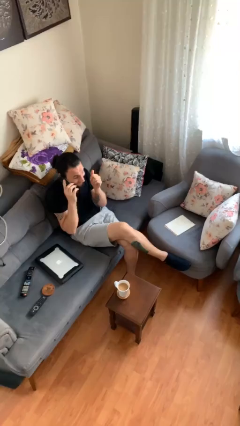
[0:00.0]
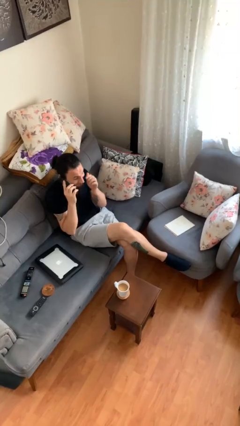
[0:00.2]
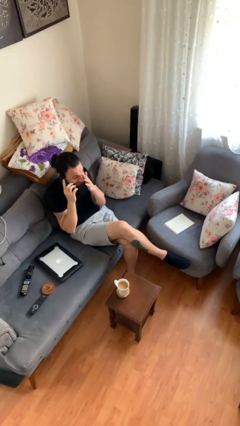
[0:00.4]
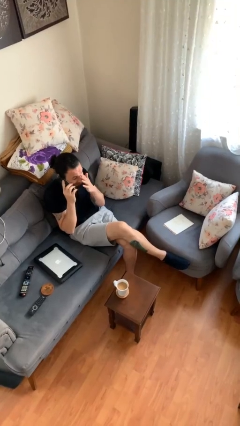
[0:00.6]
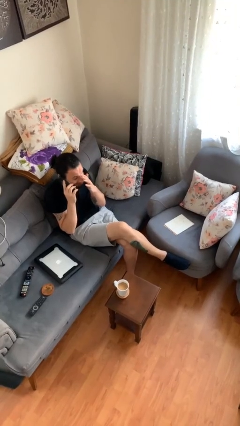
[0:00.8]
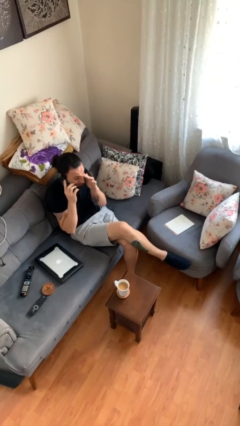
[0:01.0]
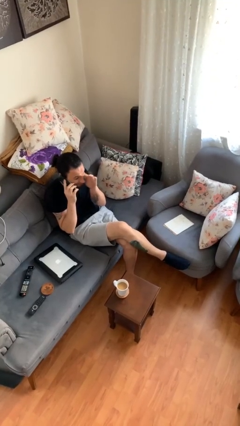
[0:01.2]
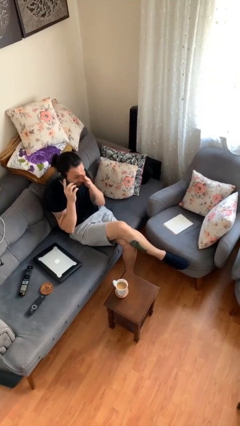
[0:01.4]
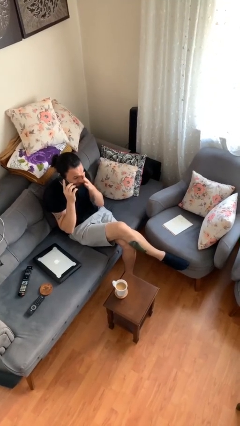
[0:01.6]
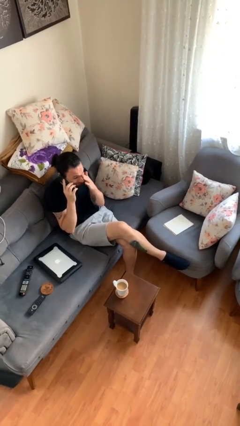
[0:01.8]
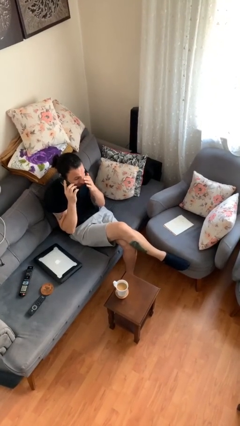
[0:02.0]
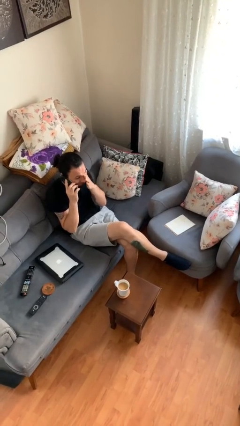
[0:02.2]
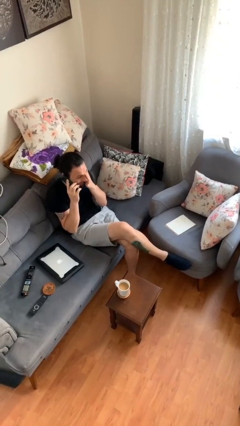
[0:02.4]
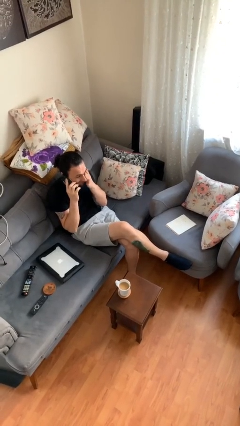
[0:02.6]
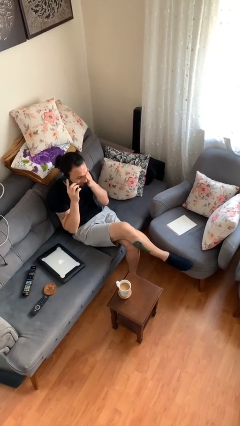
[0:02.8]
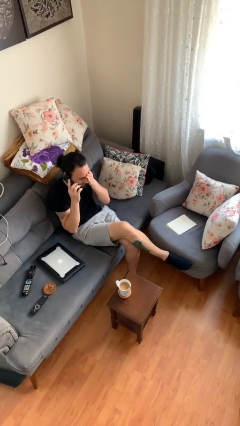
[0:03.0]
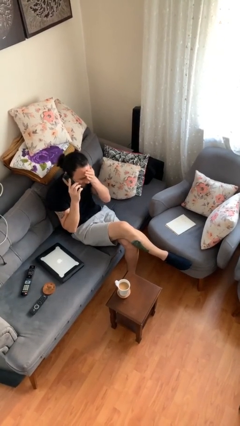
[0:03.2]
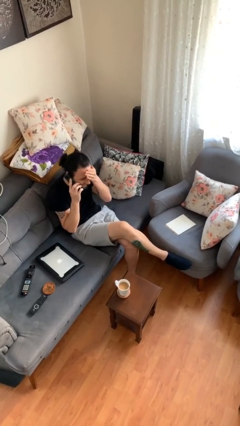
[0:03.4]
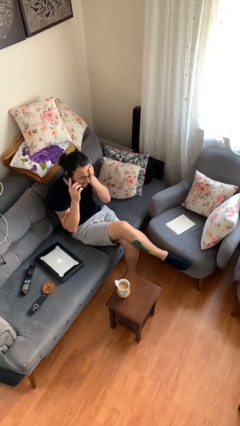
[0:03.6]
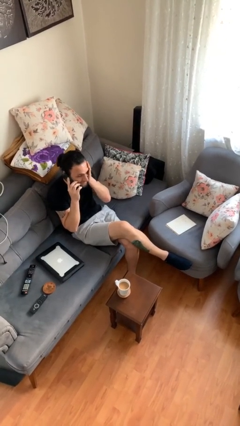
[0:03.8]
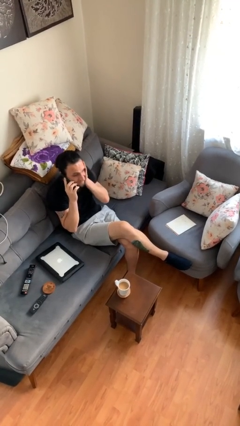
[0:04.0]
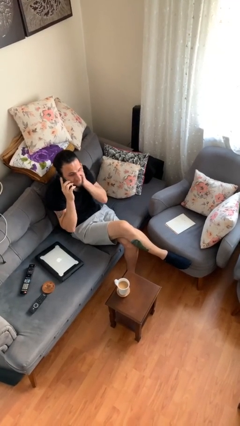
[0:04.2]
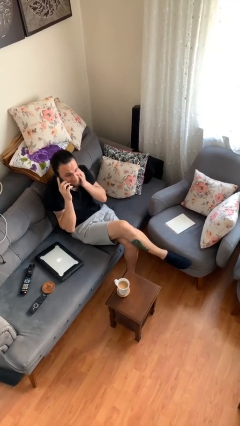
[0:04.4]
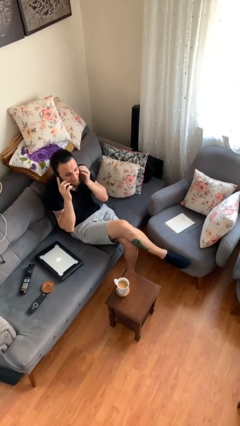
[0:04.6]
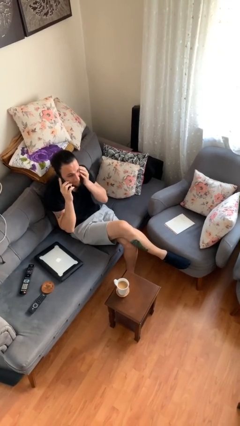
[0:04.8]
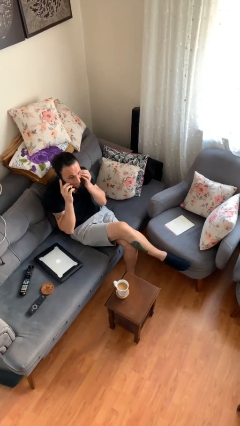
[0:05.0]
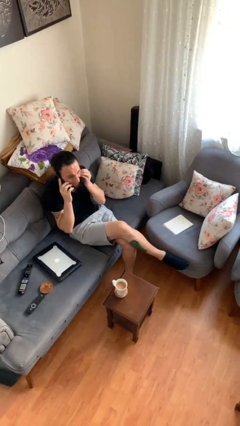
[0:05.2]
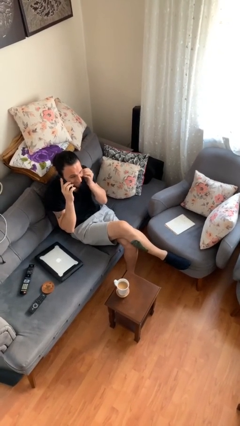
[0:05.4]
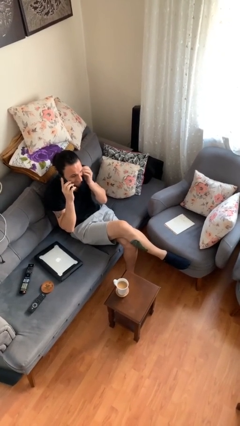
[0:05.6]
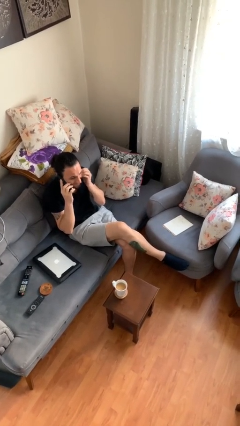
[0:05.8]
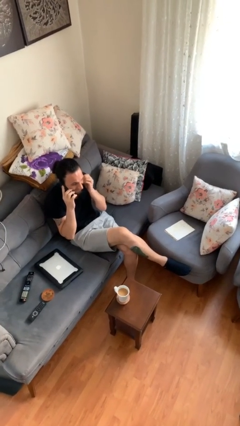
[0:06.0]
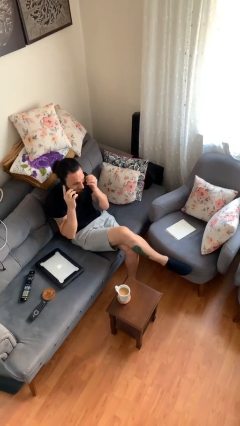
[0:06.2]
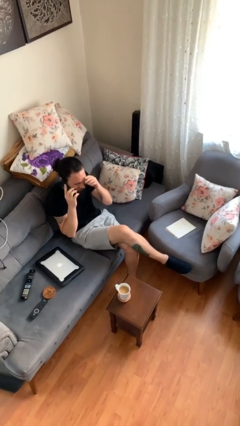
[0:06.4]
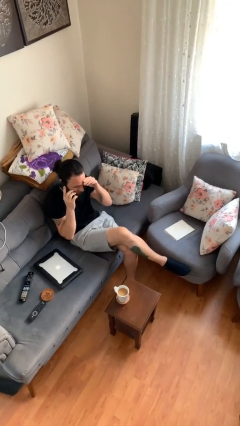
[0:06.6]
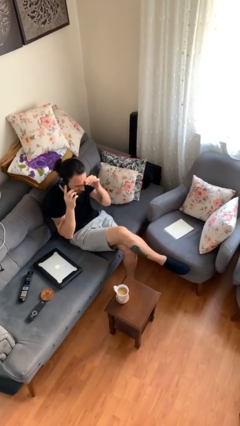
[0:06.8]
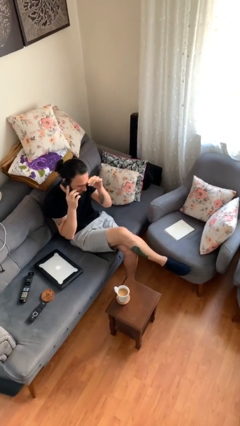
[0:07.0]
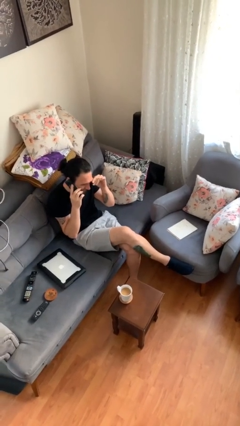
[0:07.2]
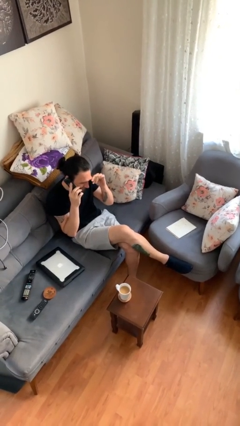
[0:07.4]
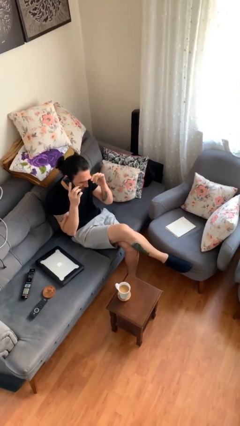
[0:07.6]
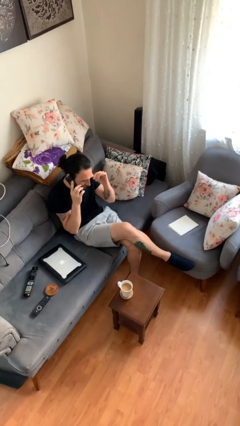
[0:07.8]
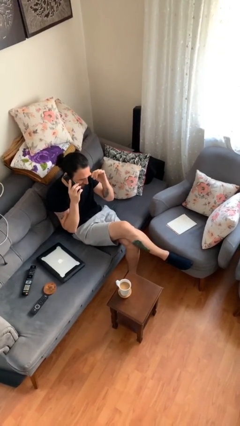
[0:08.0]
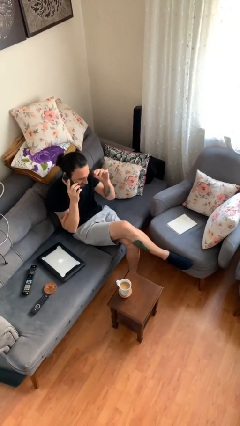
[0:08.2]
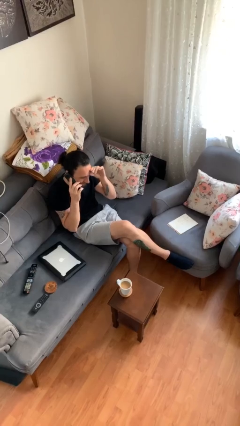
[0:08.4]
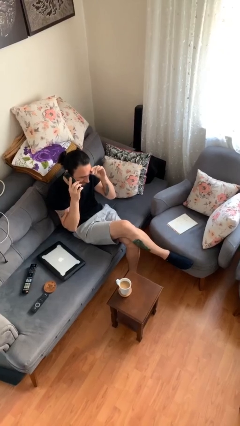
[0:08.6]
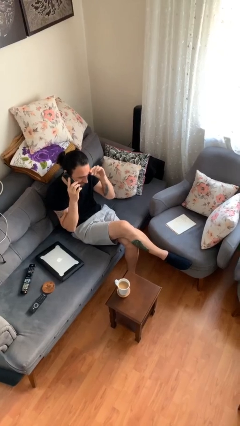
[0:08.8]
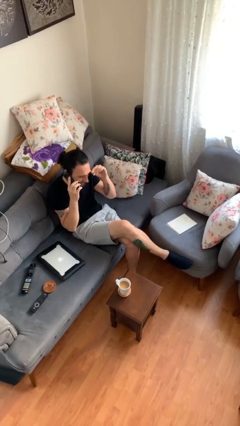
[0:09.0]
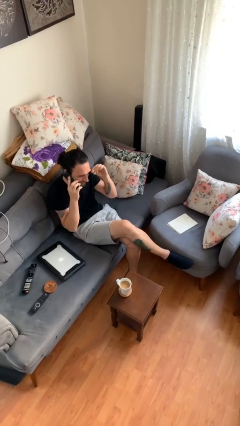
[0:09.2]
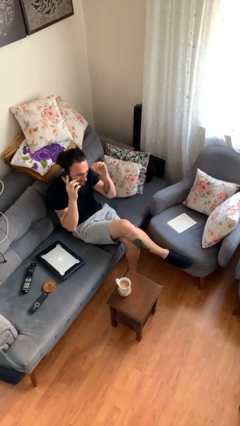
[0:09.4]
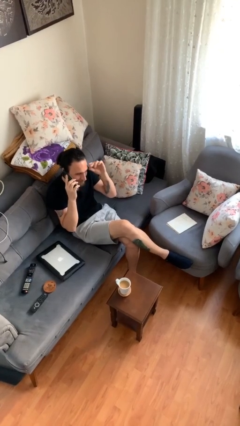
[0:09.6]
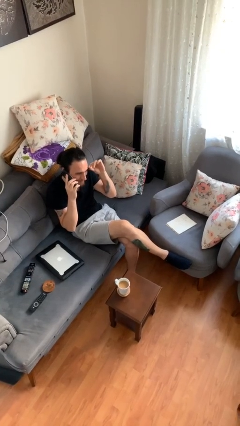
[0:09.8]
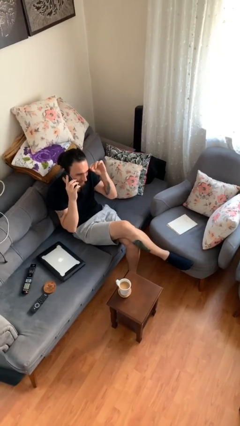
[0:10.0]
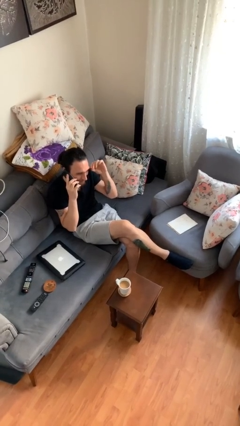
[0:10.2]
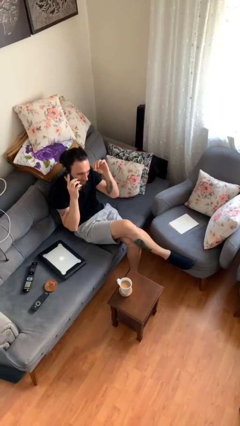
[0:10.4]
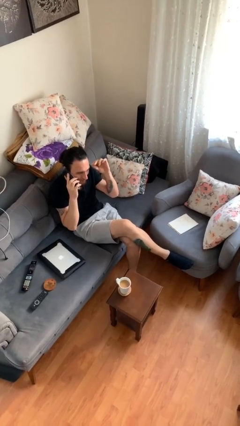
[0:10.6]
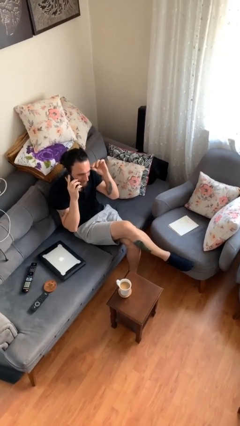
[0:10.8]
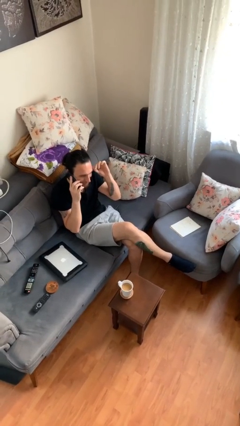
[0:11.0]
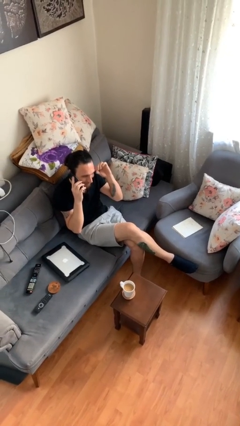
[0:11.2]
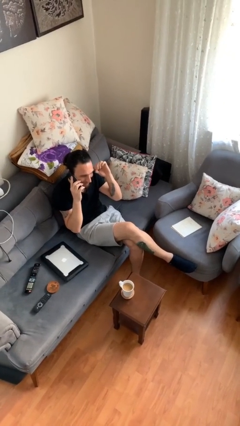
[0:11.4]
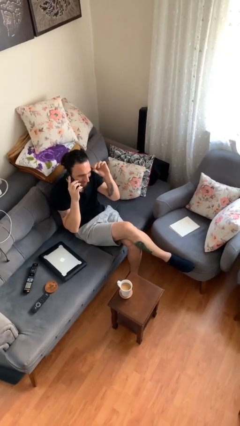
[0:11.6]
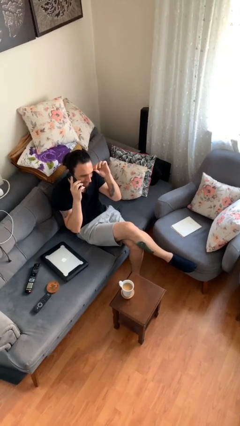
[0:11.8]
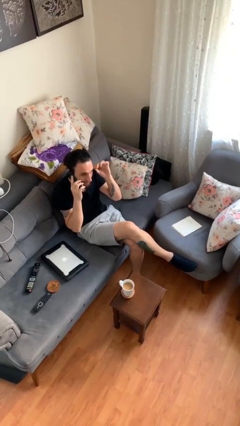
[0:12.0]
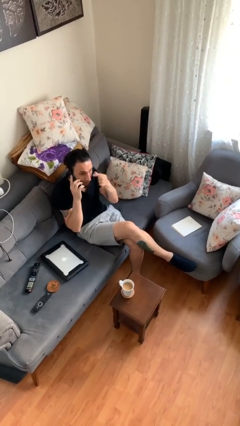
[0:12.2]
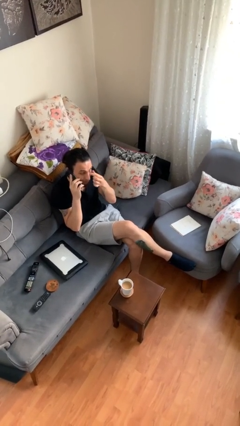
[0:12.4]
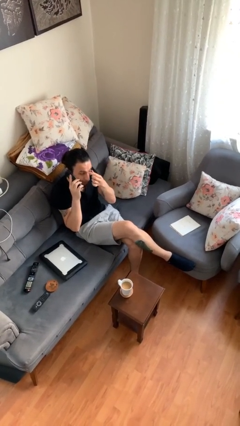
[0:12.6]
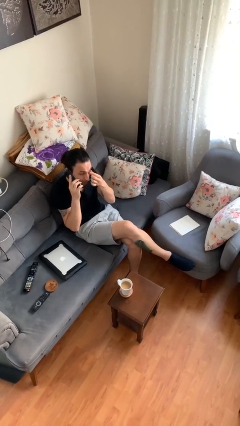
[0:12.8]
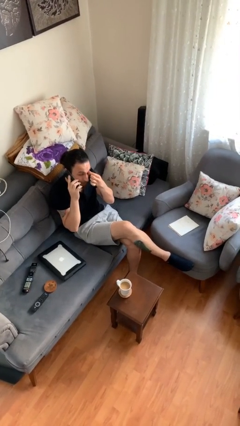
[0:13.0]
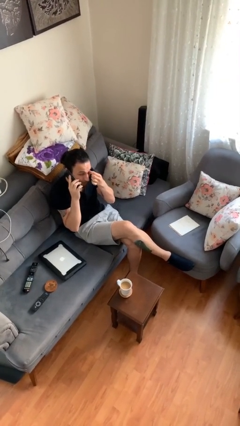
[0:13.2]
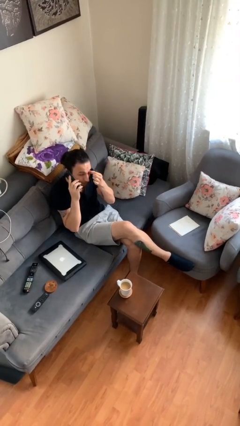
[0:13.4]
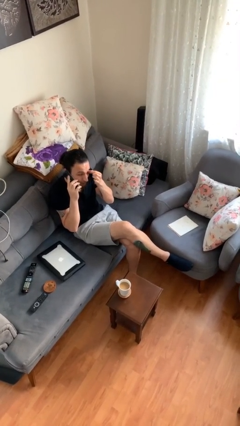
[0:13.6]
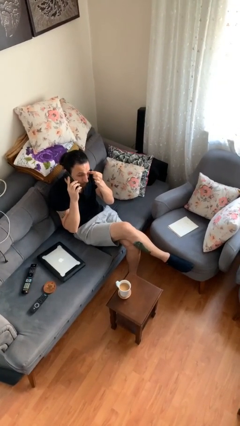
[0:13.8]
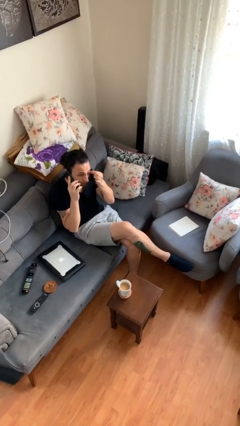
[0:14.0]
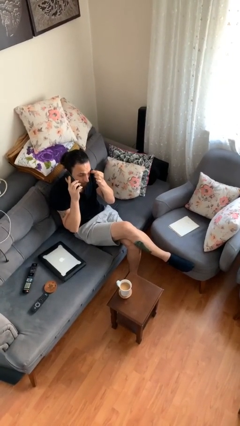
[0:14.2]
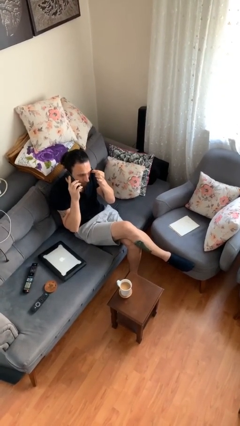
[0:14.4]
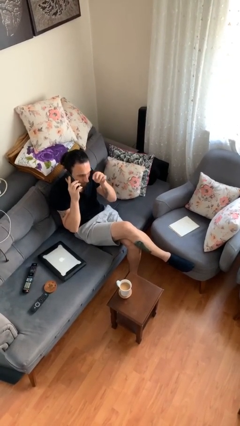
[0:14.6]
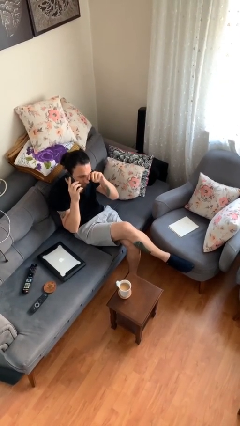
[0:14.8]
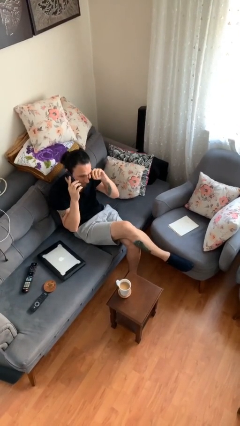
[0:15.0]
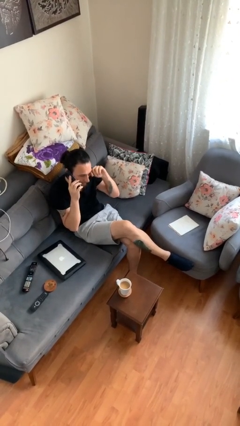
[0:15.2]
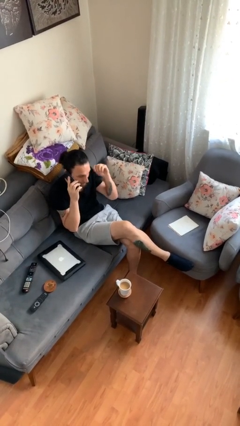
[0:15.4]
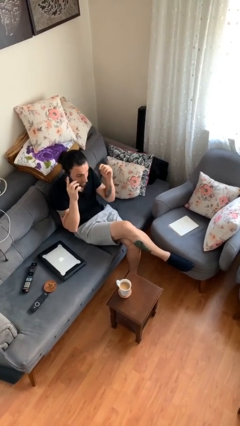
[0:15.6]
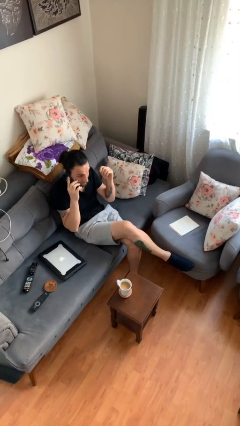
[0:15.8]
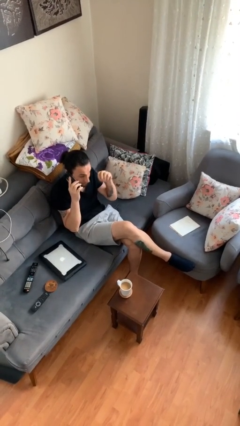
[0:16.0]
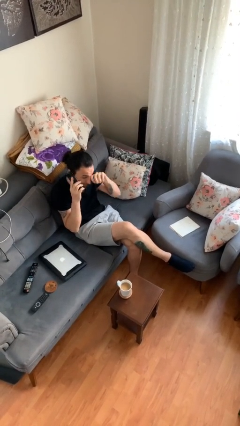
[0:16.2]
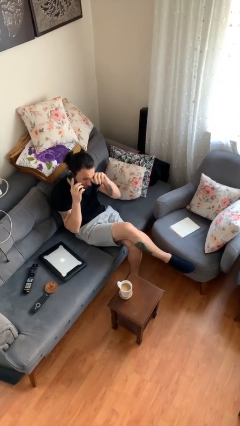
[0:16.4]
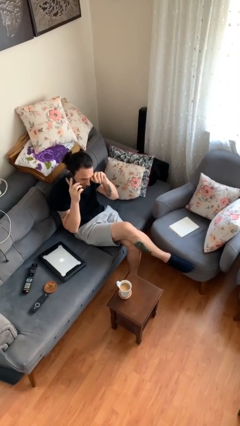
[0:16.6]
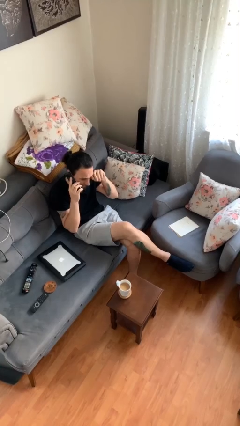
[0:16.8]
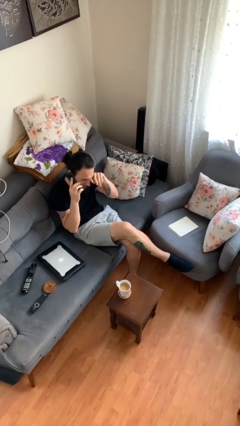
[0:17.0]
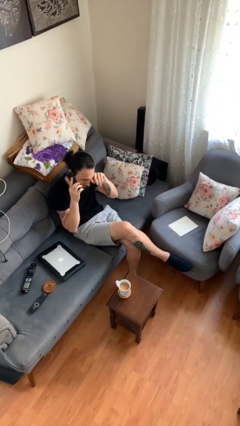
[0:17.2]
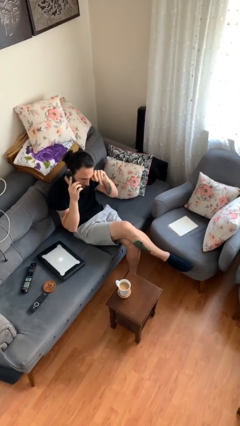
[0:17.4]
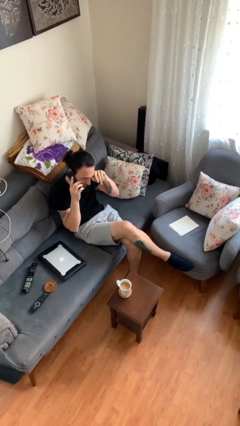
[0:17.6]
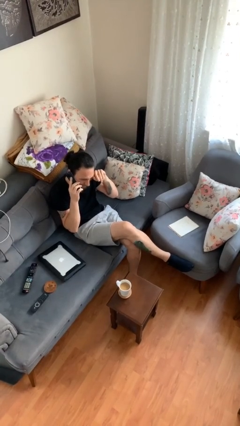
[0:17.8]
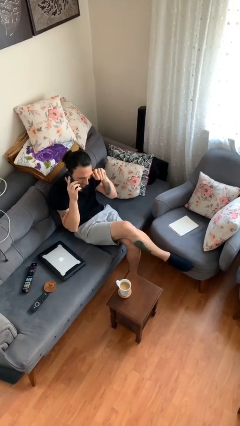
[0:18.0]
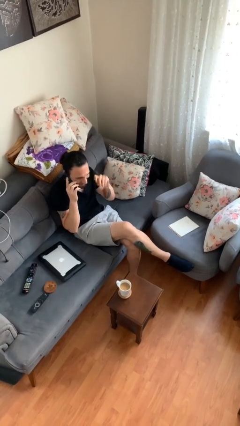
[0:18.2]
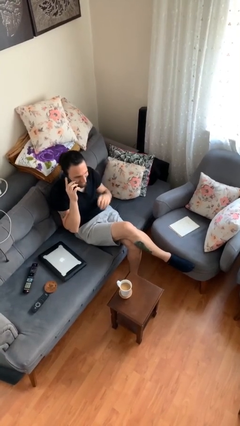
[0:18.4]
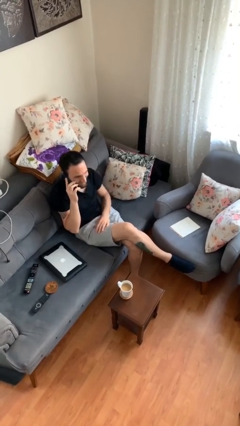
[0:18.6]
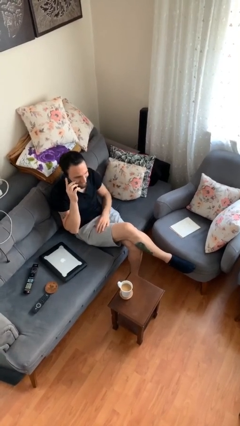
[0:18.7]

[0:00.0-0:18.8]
person talks on phone
